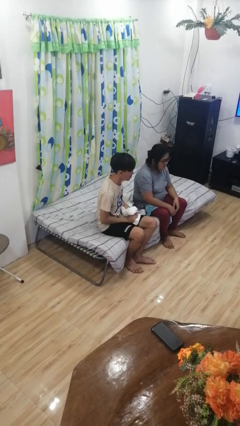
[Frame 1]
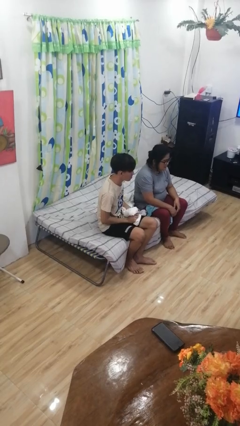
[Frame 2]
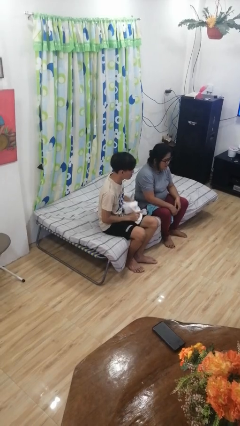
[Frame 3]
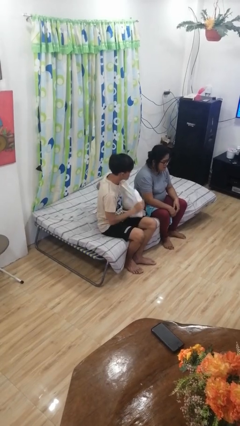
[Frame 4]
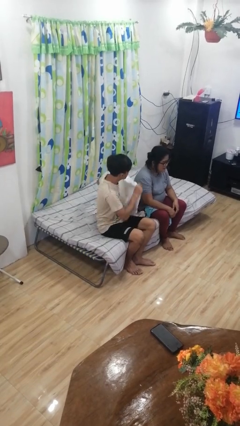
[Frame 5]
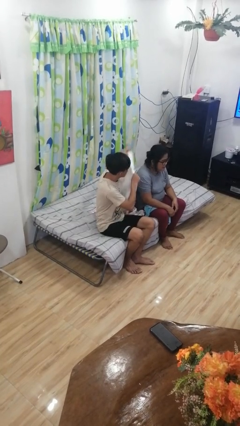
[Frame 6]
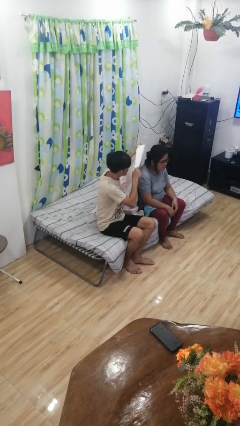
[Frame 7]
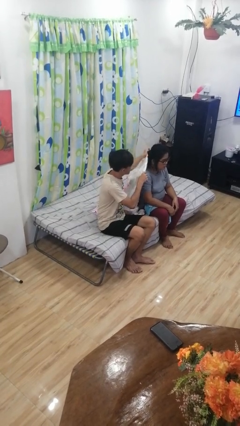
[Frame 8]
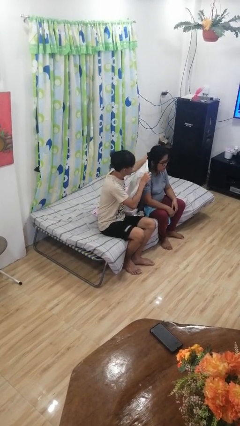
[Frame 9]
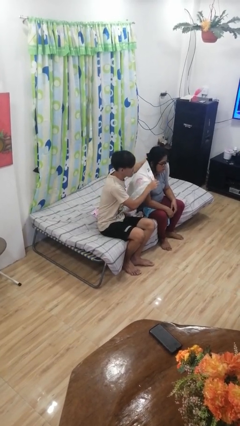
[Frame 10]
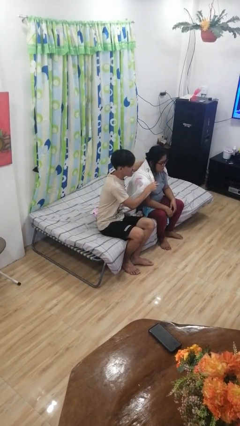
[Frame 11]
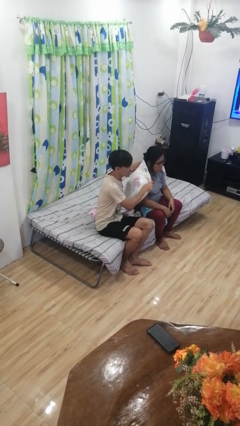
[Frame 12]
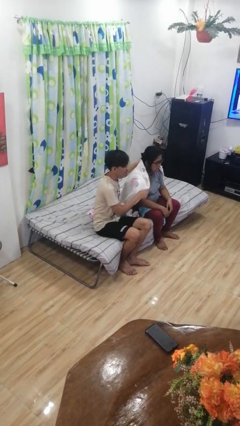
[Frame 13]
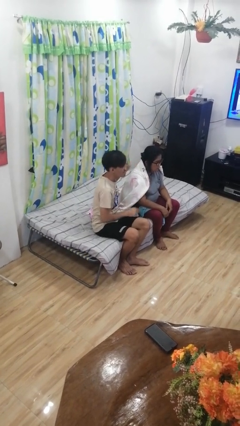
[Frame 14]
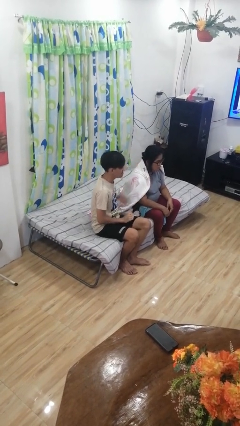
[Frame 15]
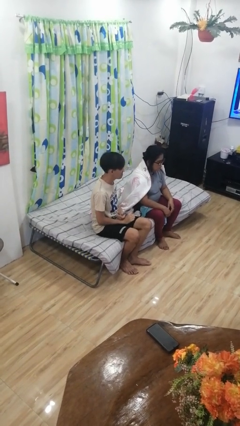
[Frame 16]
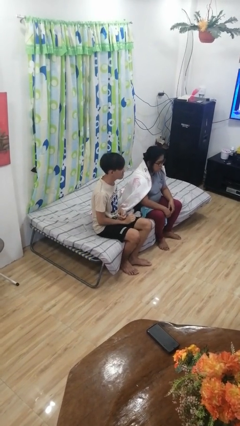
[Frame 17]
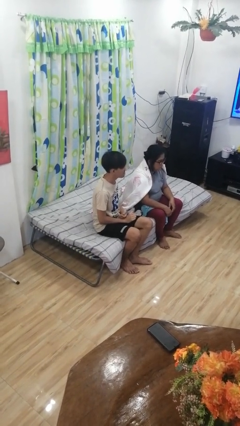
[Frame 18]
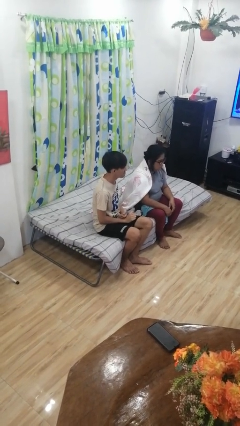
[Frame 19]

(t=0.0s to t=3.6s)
person covers friend with blanket

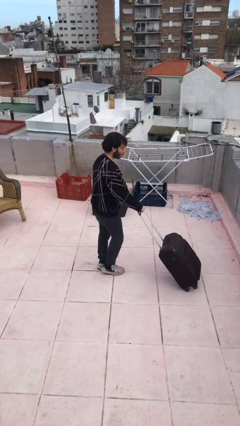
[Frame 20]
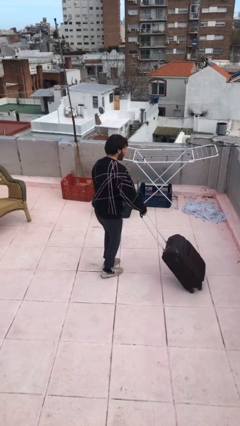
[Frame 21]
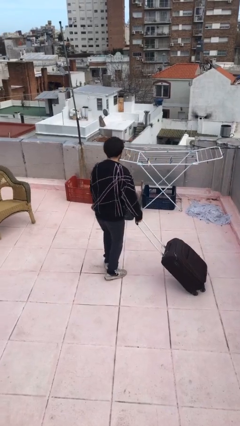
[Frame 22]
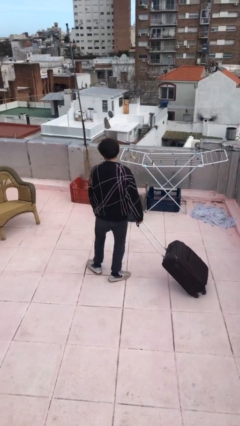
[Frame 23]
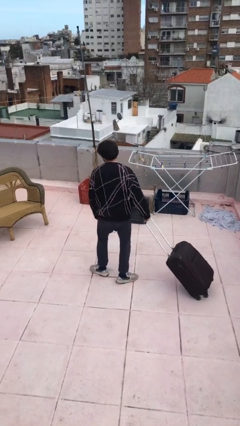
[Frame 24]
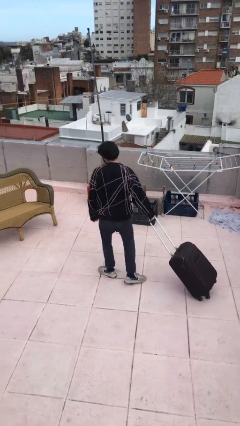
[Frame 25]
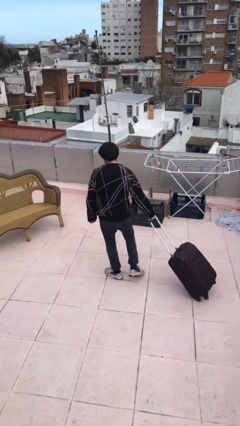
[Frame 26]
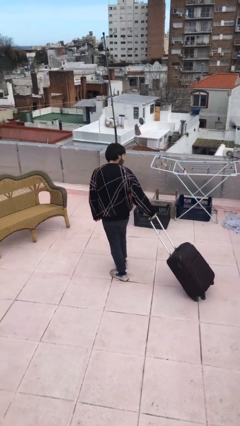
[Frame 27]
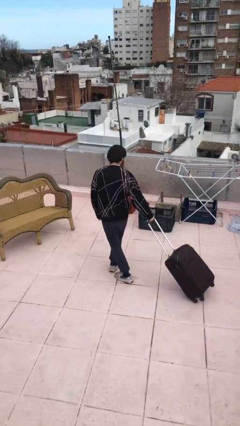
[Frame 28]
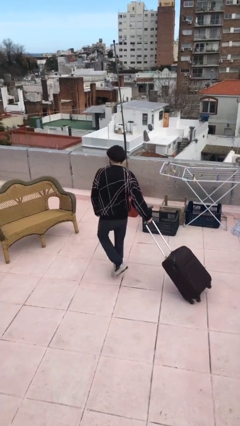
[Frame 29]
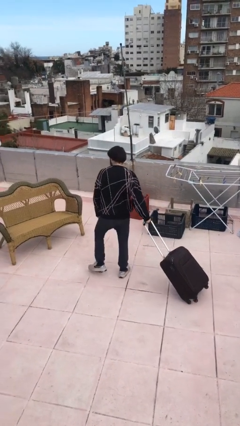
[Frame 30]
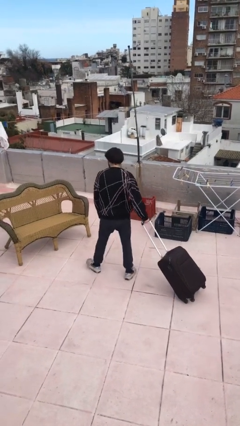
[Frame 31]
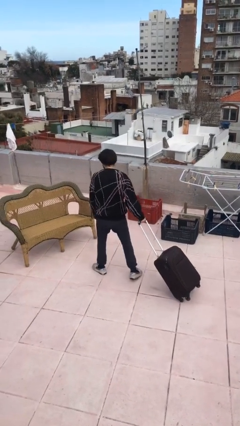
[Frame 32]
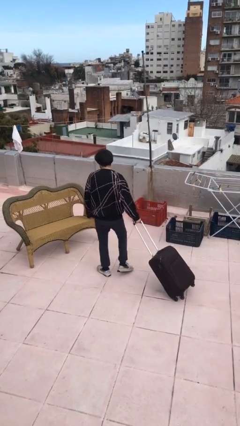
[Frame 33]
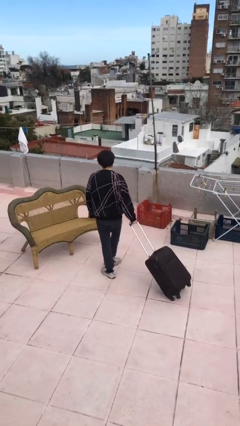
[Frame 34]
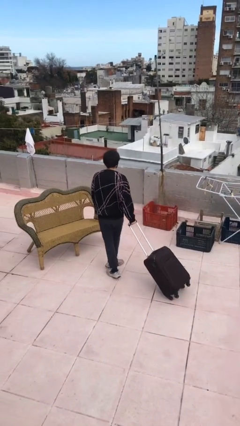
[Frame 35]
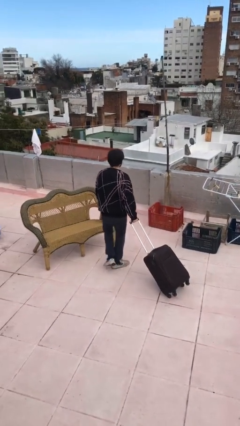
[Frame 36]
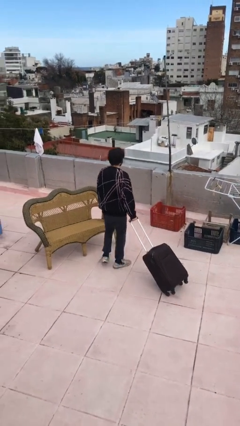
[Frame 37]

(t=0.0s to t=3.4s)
person pulls wheeled cart

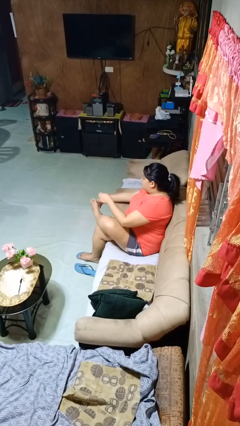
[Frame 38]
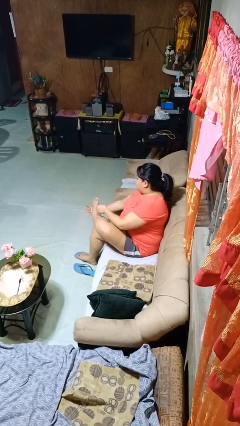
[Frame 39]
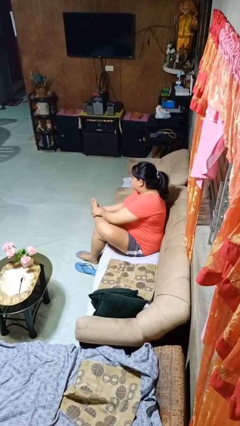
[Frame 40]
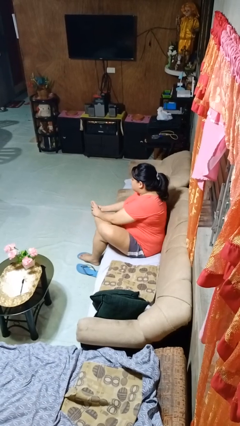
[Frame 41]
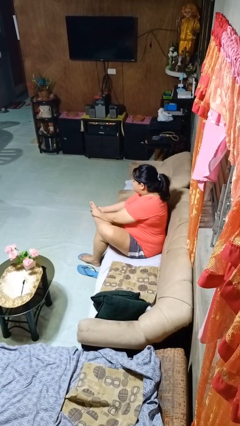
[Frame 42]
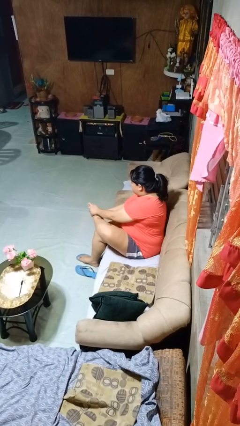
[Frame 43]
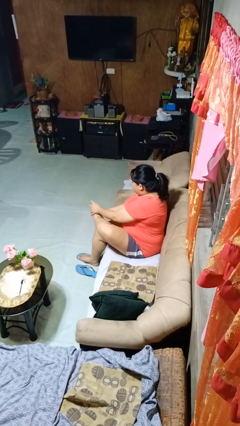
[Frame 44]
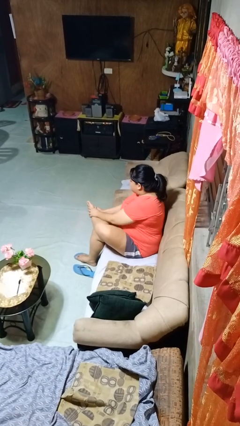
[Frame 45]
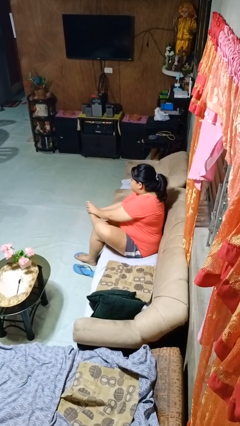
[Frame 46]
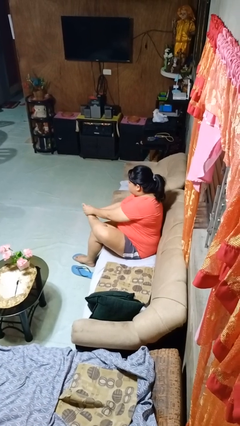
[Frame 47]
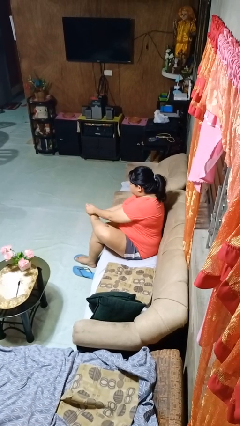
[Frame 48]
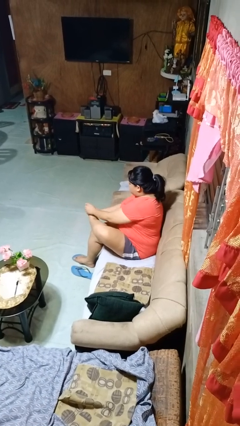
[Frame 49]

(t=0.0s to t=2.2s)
person rubs foot

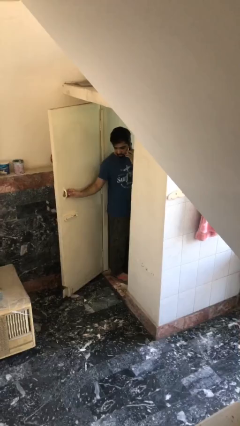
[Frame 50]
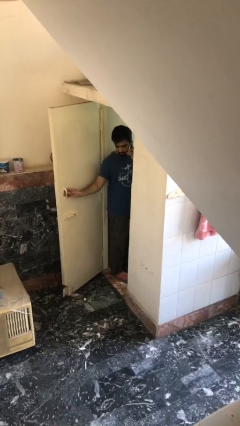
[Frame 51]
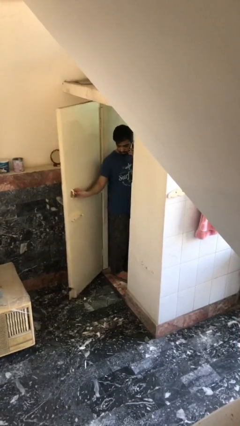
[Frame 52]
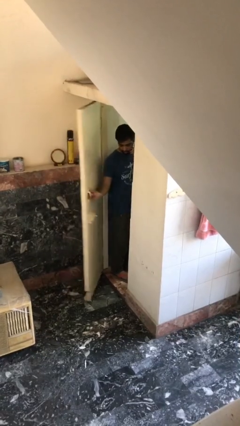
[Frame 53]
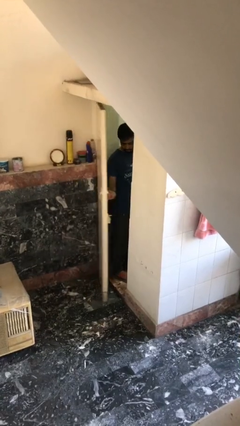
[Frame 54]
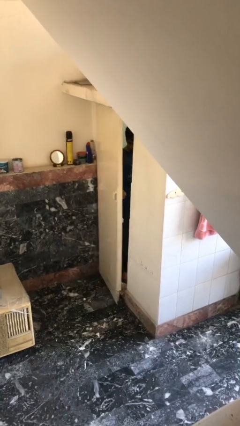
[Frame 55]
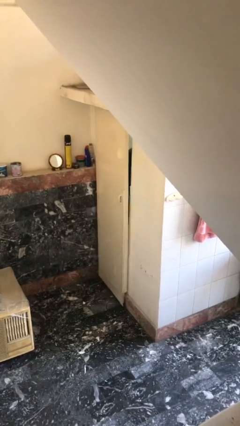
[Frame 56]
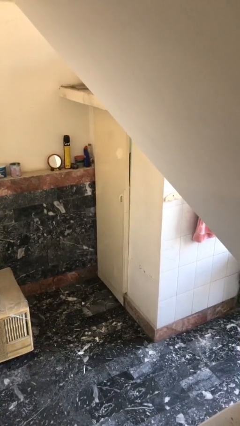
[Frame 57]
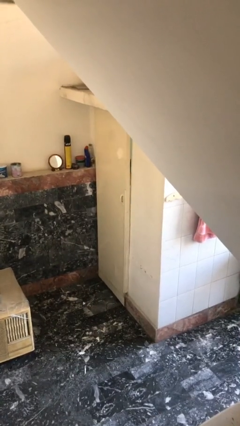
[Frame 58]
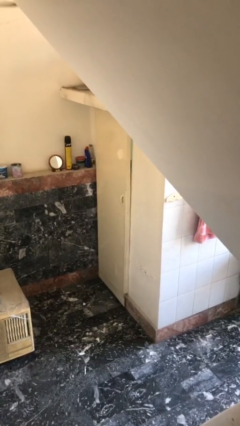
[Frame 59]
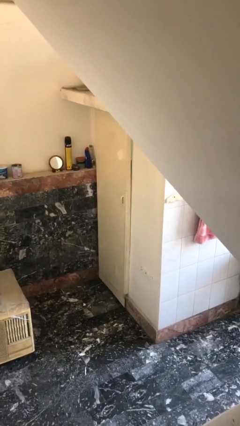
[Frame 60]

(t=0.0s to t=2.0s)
person closes facility door

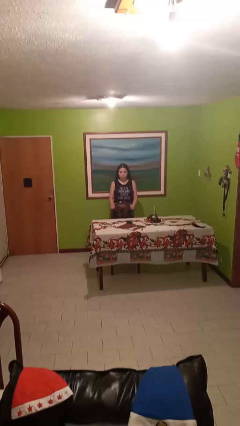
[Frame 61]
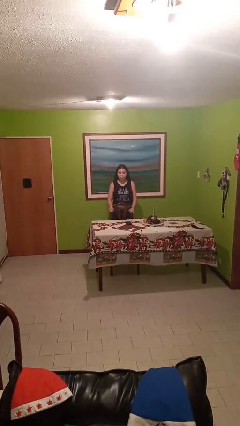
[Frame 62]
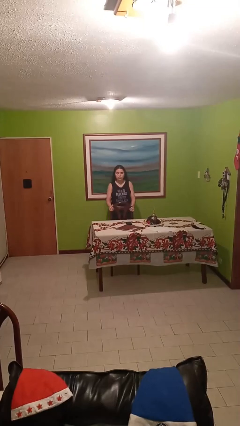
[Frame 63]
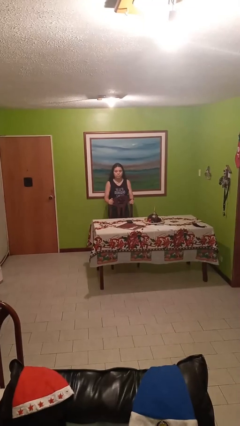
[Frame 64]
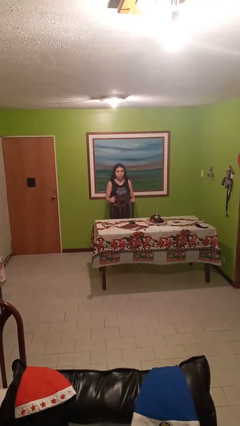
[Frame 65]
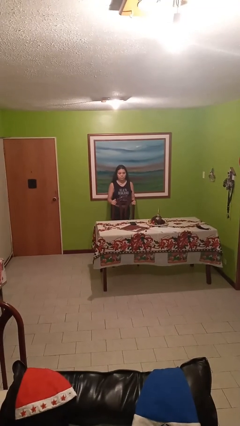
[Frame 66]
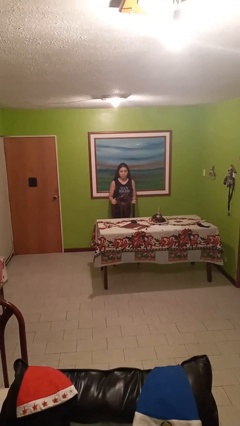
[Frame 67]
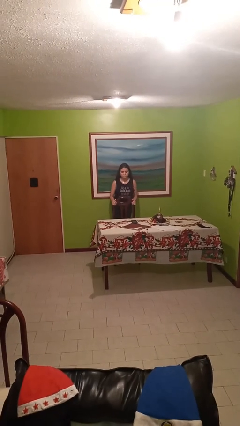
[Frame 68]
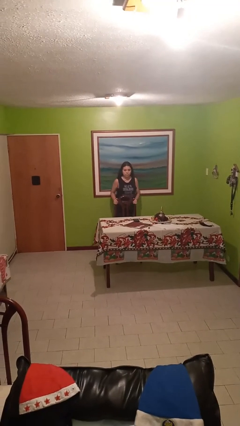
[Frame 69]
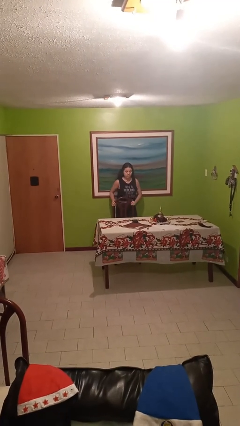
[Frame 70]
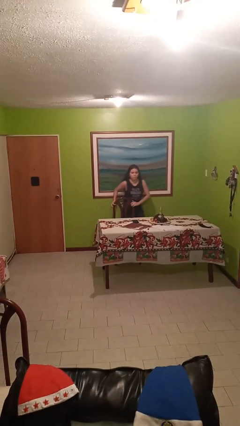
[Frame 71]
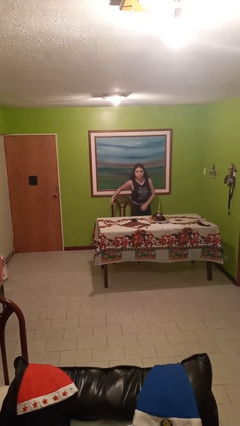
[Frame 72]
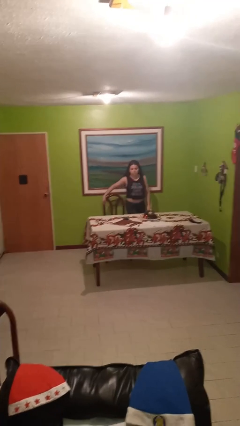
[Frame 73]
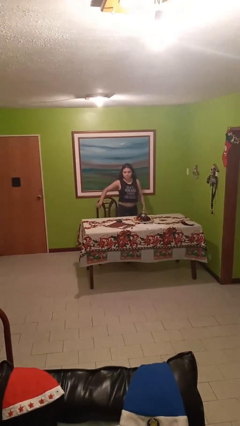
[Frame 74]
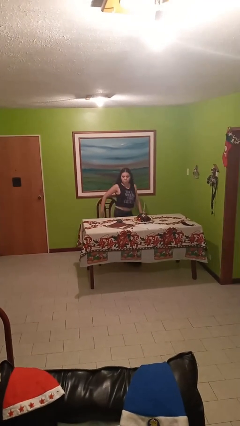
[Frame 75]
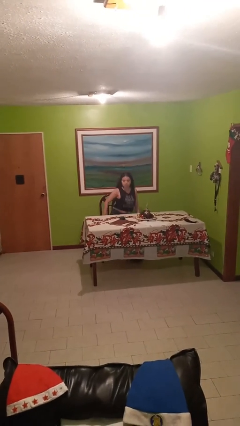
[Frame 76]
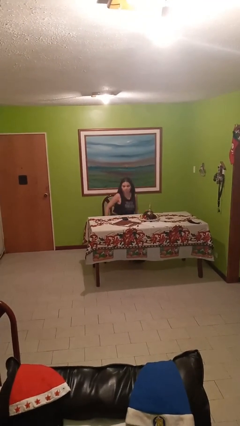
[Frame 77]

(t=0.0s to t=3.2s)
person stands up

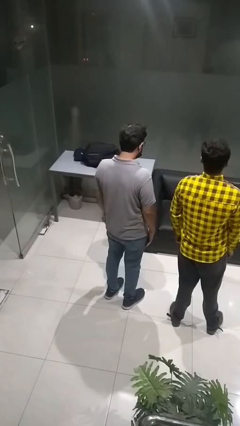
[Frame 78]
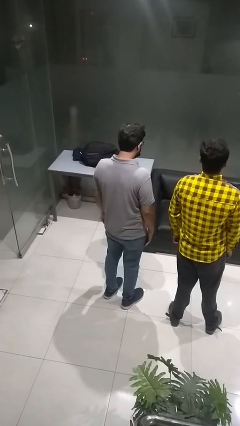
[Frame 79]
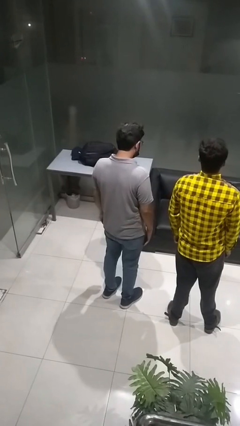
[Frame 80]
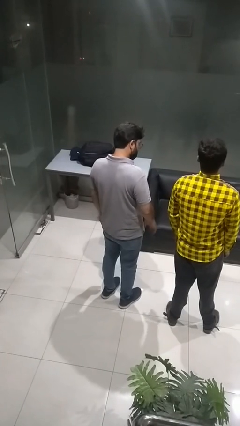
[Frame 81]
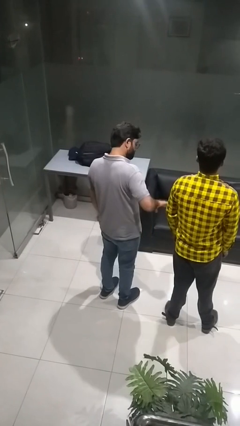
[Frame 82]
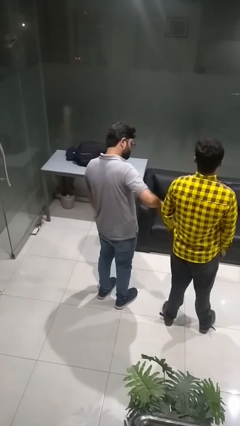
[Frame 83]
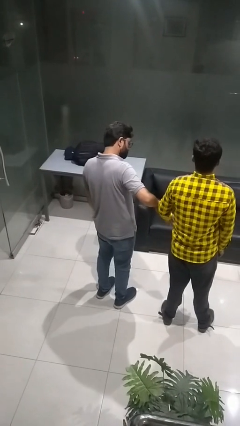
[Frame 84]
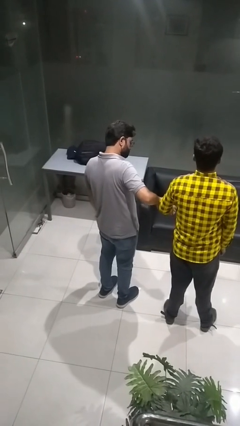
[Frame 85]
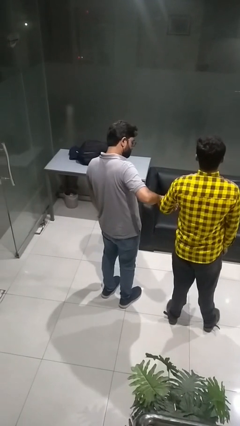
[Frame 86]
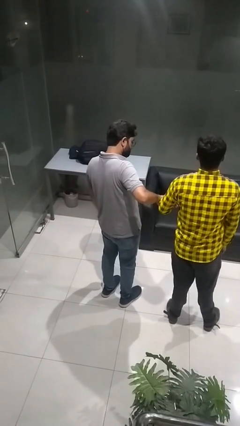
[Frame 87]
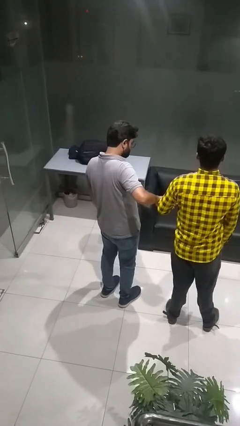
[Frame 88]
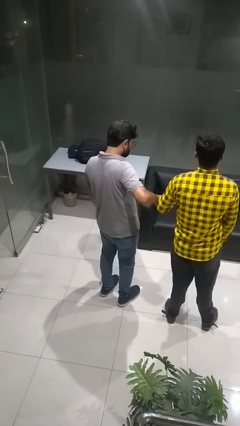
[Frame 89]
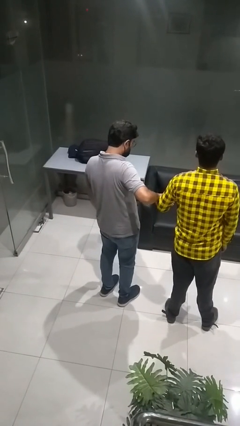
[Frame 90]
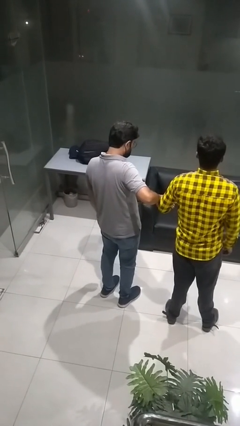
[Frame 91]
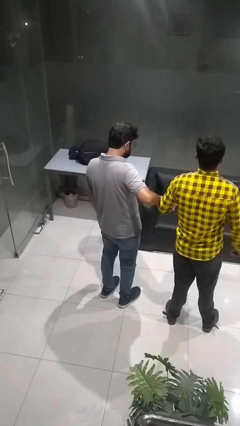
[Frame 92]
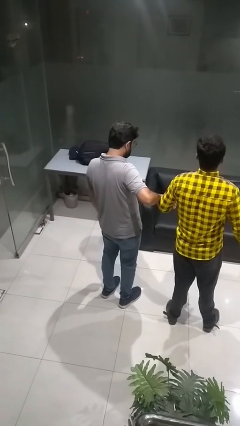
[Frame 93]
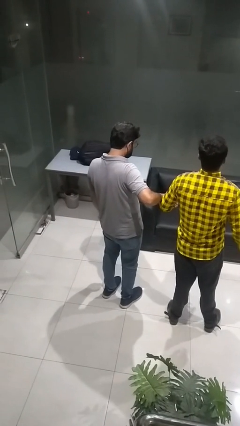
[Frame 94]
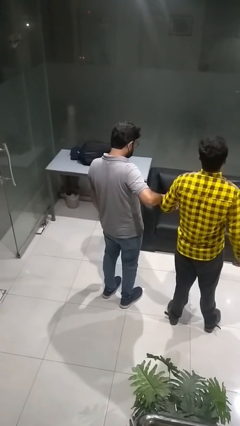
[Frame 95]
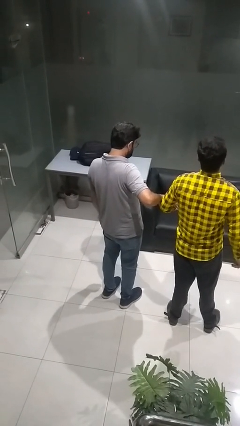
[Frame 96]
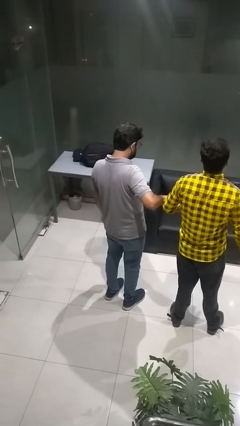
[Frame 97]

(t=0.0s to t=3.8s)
person grabs person by forearm
